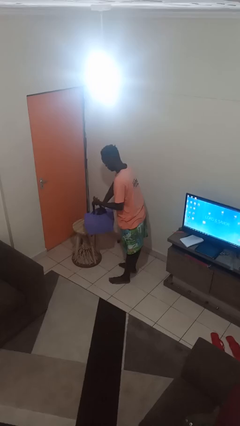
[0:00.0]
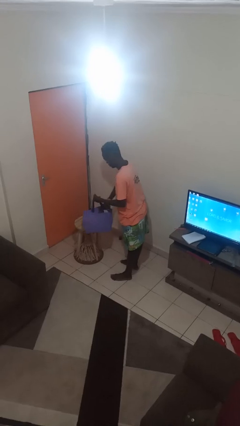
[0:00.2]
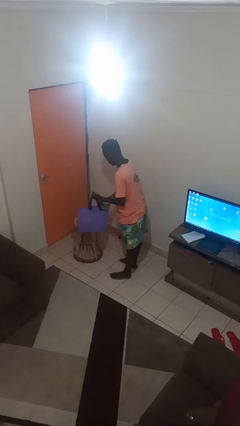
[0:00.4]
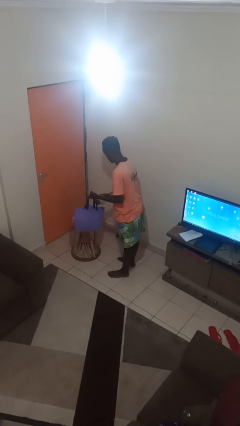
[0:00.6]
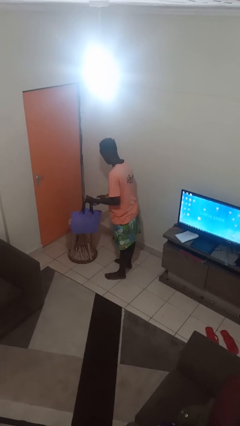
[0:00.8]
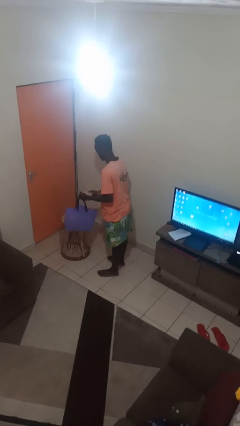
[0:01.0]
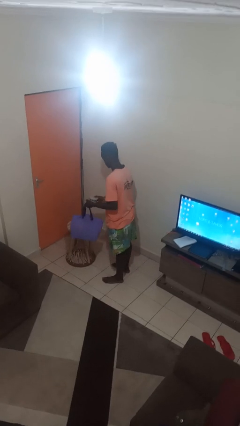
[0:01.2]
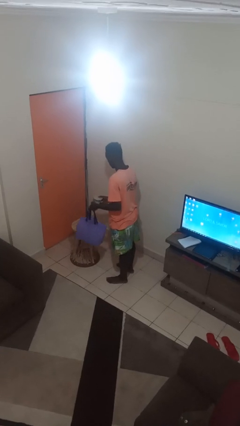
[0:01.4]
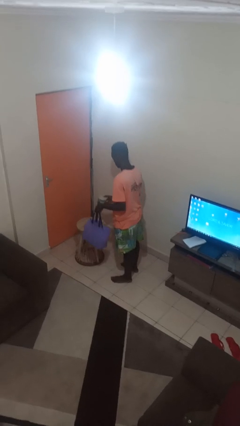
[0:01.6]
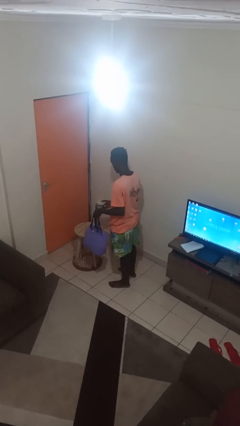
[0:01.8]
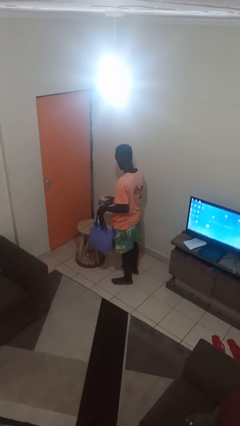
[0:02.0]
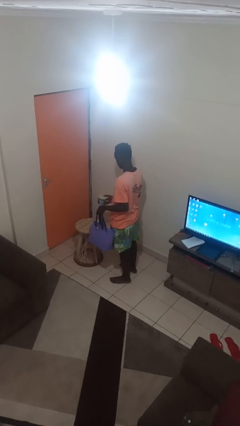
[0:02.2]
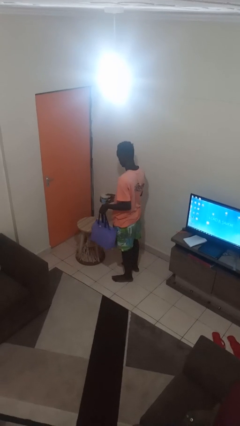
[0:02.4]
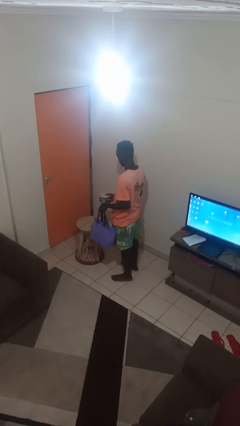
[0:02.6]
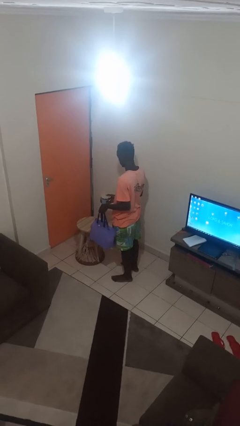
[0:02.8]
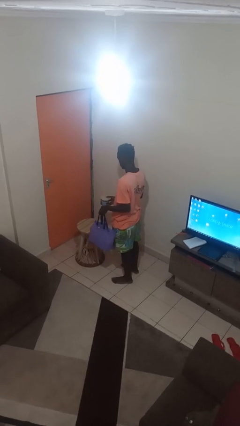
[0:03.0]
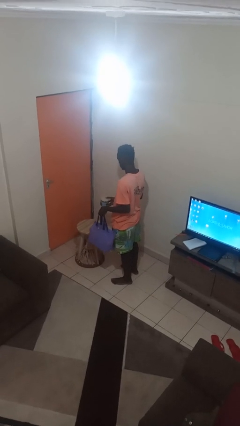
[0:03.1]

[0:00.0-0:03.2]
person takes object from bag

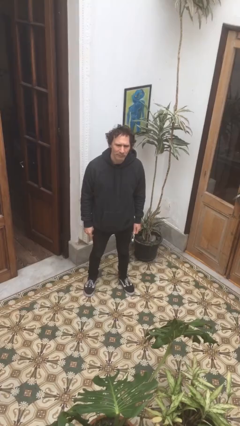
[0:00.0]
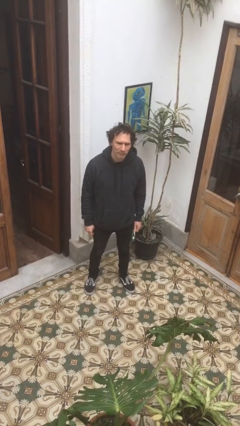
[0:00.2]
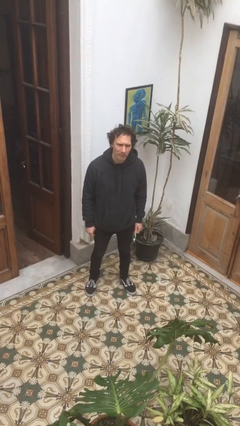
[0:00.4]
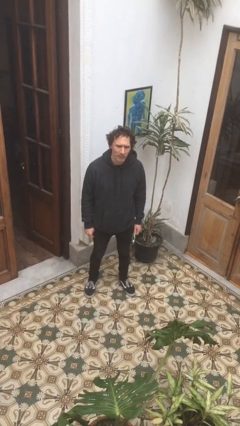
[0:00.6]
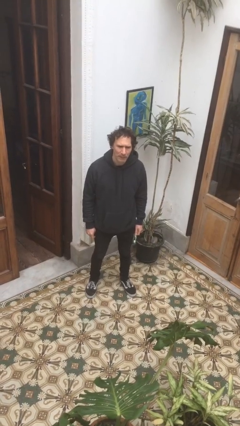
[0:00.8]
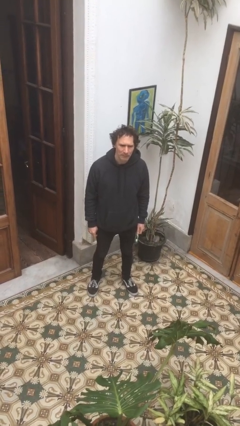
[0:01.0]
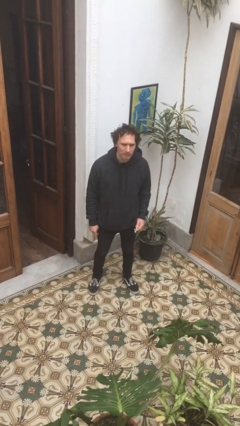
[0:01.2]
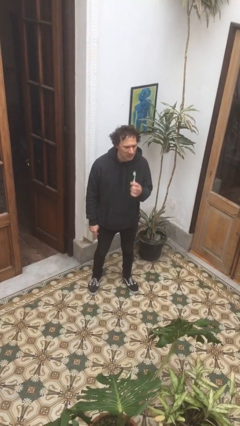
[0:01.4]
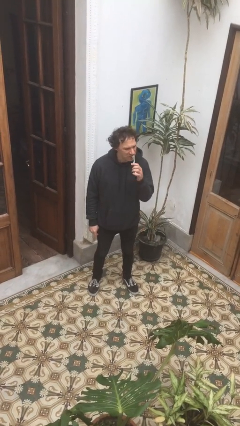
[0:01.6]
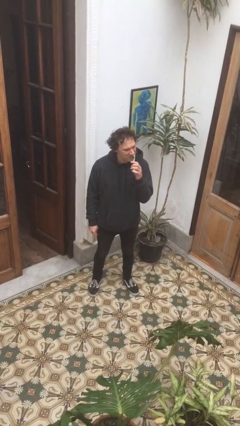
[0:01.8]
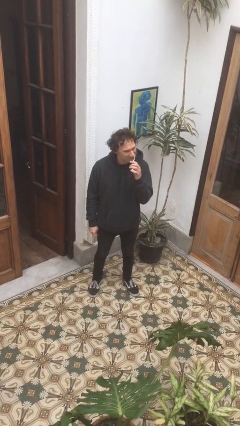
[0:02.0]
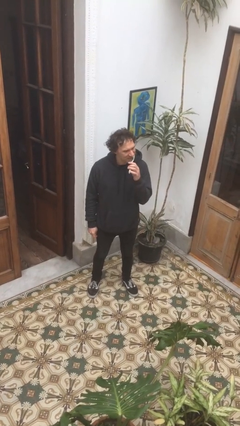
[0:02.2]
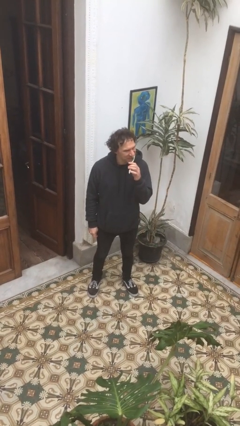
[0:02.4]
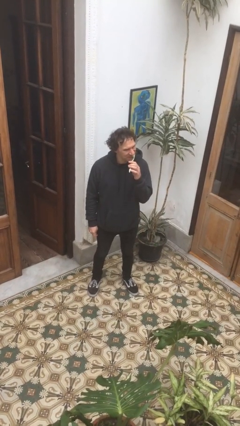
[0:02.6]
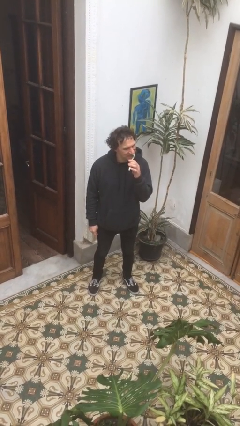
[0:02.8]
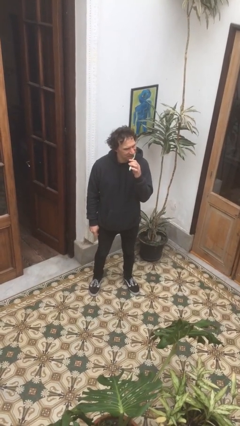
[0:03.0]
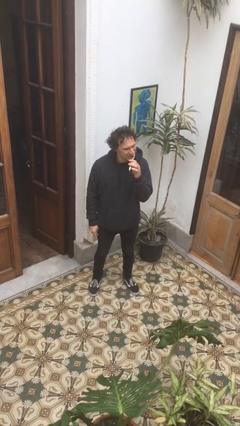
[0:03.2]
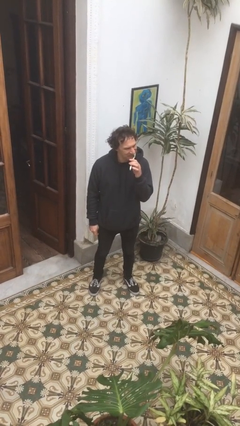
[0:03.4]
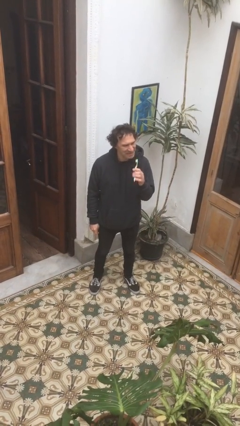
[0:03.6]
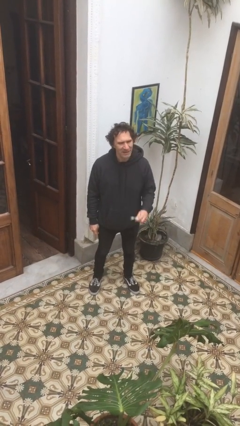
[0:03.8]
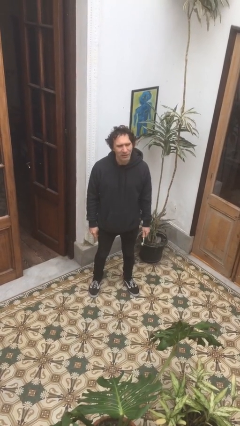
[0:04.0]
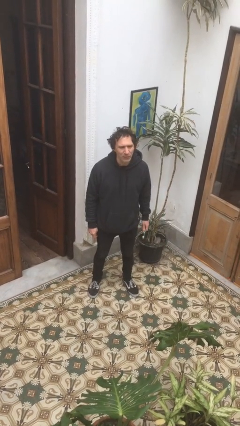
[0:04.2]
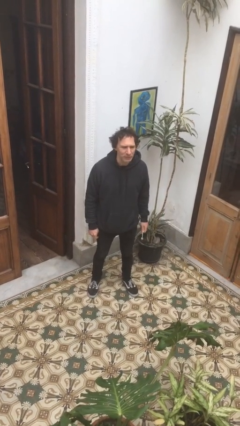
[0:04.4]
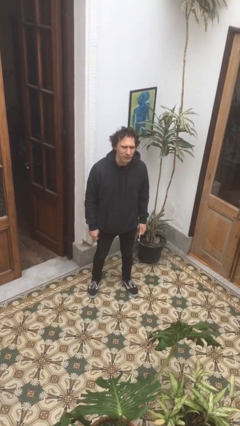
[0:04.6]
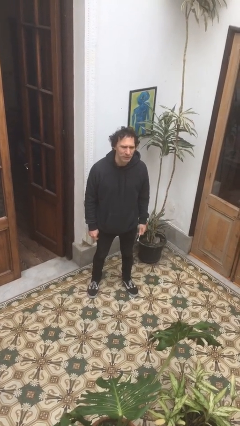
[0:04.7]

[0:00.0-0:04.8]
person brushes teeth

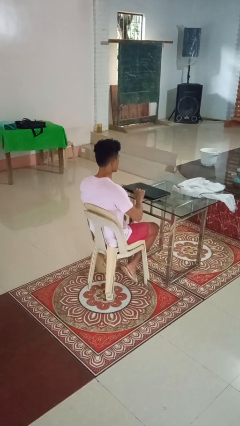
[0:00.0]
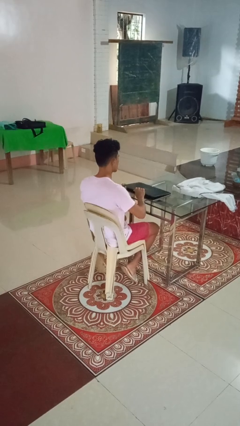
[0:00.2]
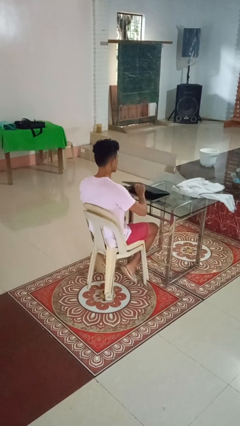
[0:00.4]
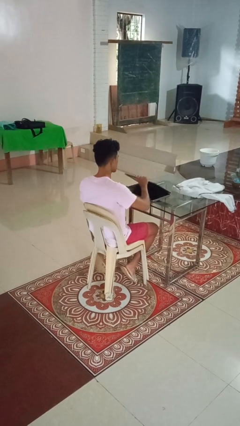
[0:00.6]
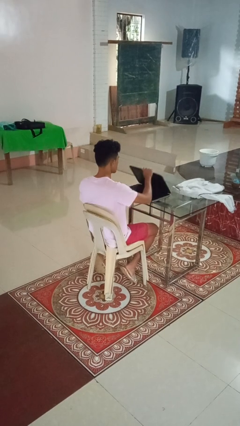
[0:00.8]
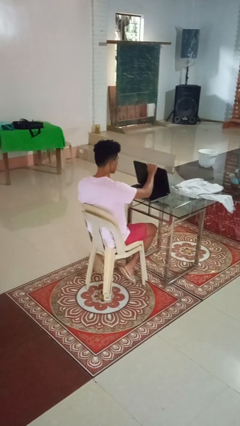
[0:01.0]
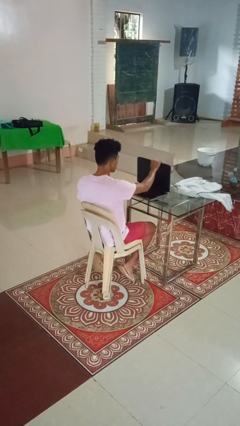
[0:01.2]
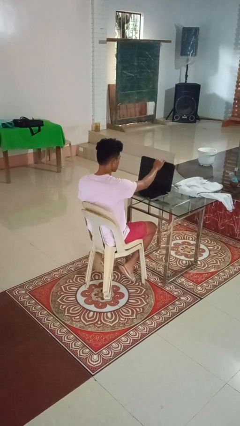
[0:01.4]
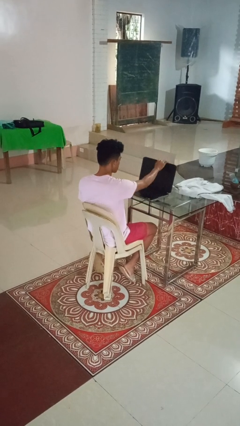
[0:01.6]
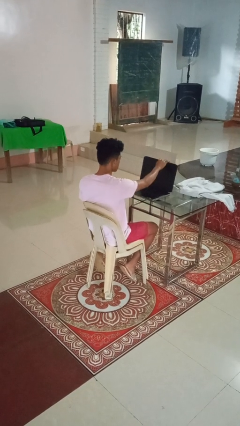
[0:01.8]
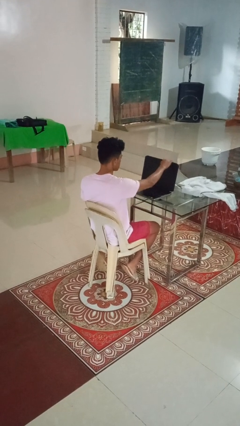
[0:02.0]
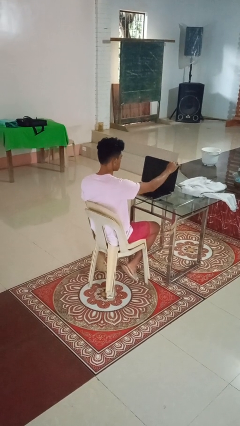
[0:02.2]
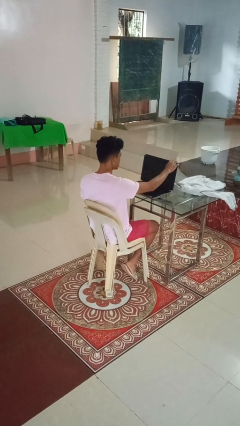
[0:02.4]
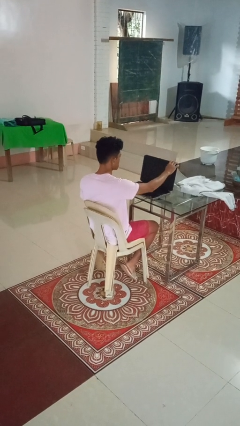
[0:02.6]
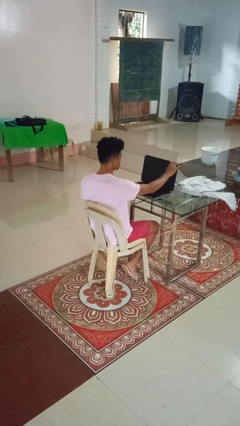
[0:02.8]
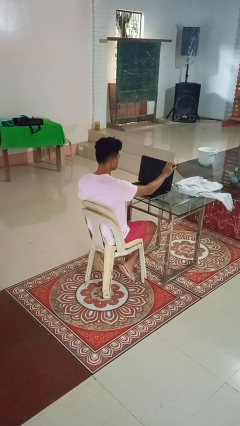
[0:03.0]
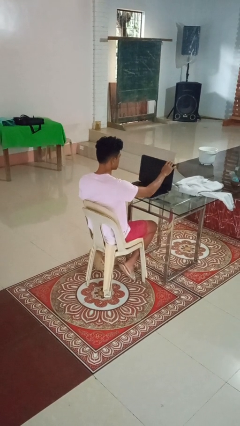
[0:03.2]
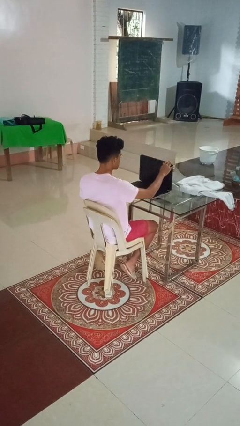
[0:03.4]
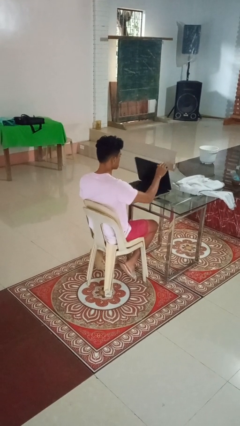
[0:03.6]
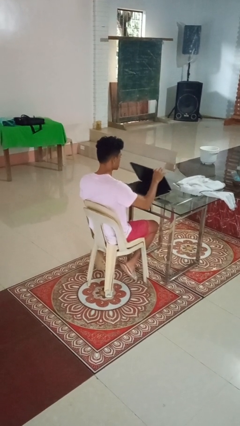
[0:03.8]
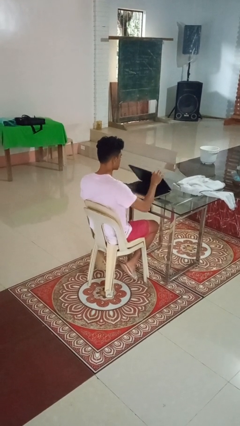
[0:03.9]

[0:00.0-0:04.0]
person opens laptop

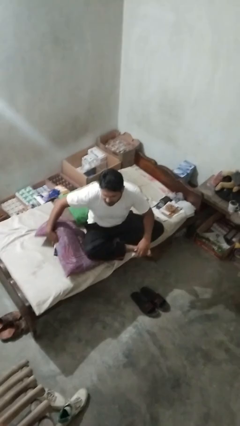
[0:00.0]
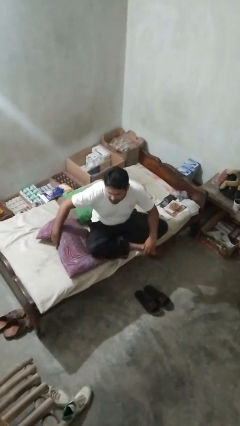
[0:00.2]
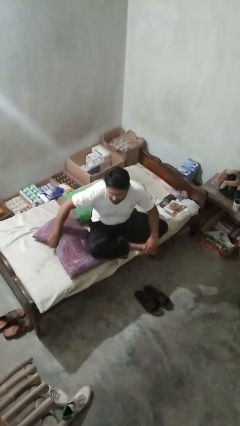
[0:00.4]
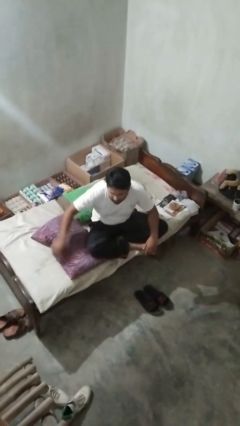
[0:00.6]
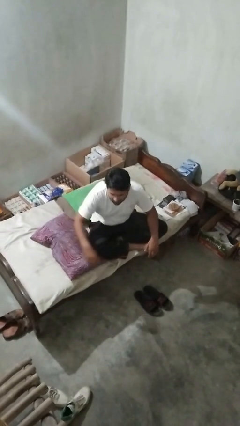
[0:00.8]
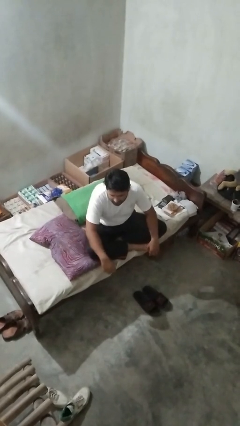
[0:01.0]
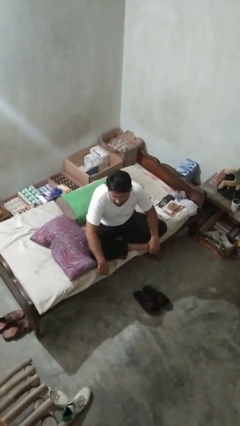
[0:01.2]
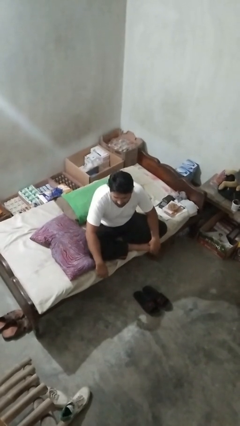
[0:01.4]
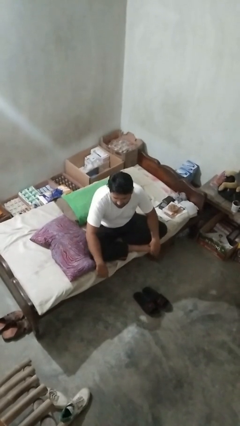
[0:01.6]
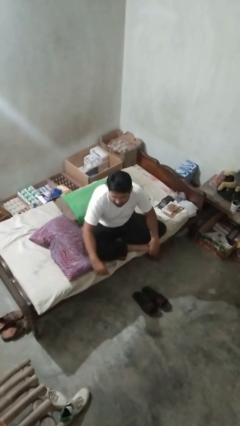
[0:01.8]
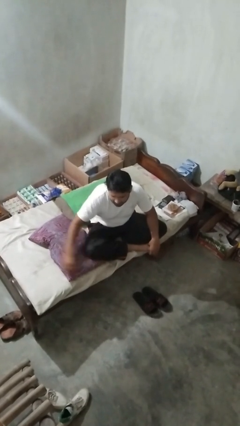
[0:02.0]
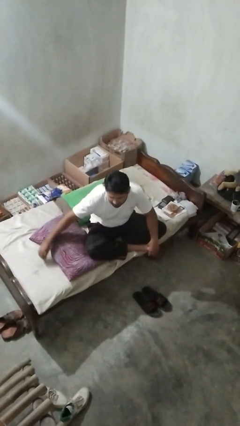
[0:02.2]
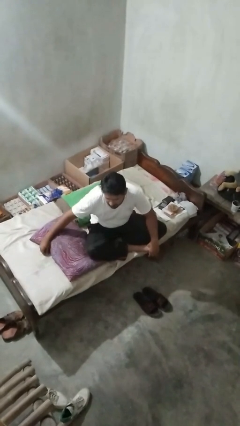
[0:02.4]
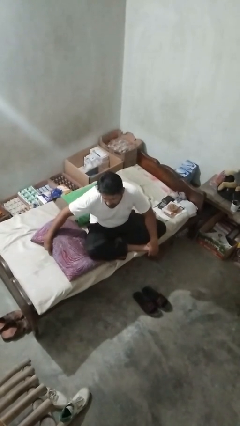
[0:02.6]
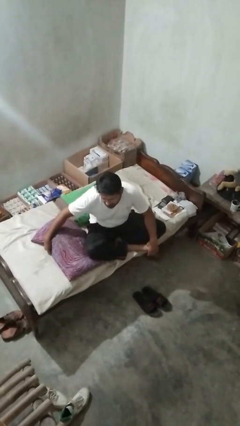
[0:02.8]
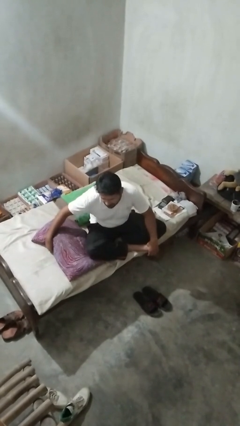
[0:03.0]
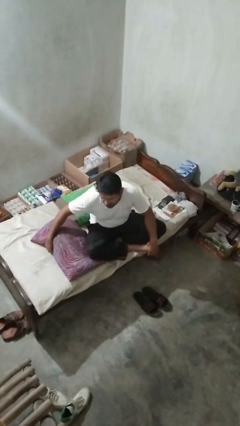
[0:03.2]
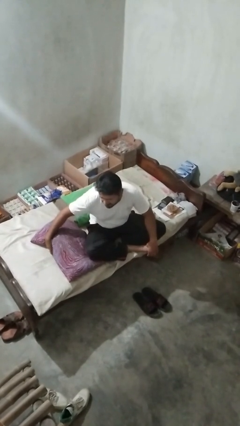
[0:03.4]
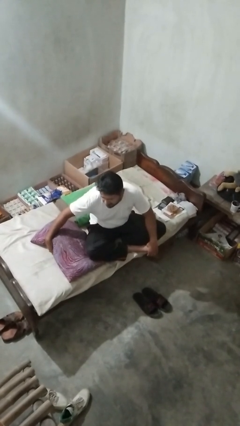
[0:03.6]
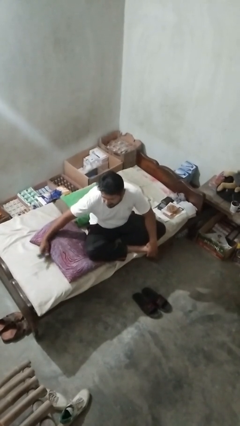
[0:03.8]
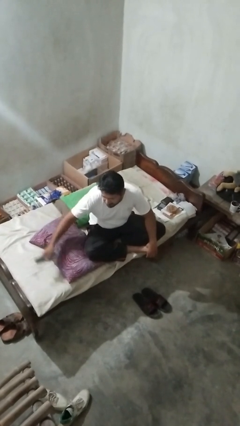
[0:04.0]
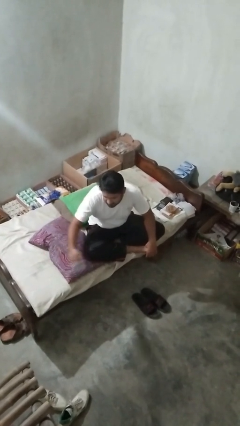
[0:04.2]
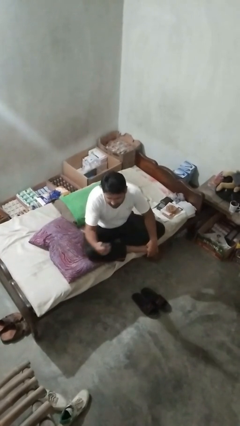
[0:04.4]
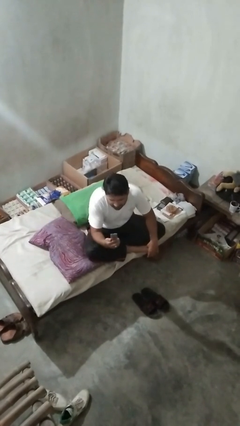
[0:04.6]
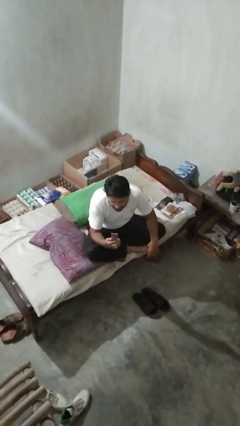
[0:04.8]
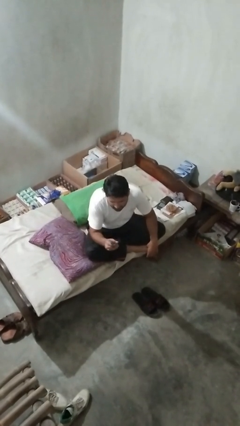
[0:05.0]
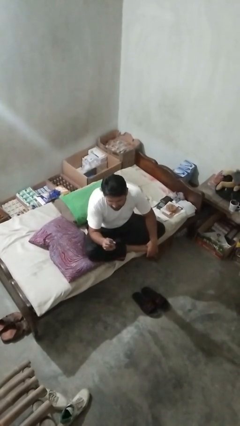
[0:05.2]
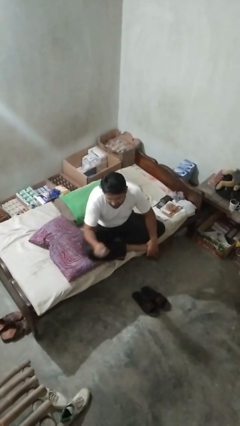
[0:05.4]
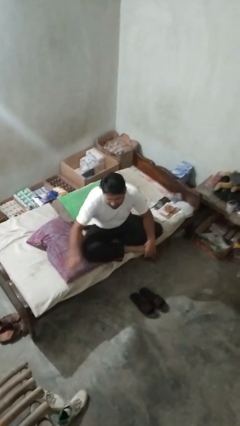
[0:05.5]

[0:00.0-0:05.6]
person searches in couch

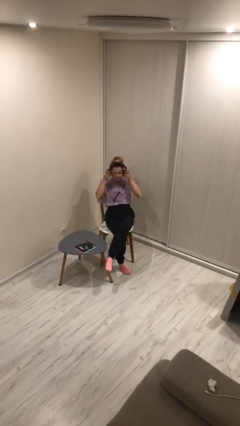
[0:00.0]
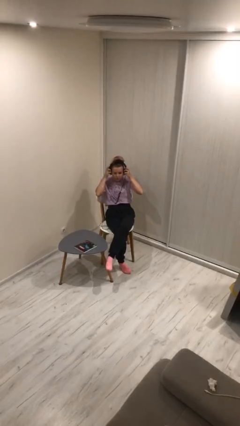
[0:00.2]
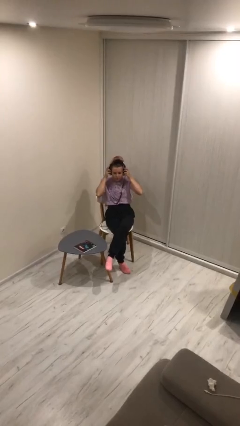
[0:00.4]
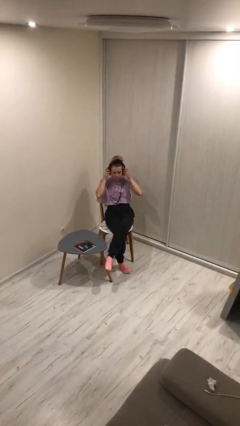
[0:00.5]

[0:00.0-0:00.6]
person puts on headphones
